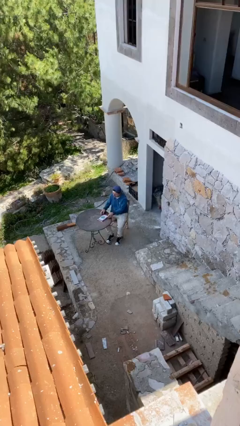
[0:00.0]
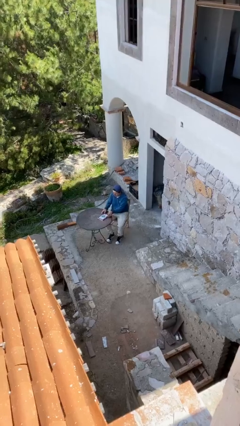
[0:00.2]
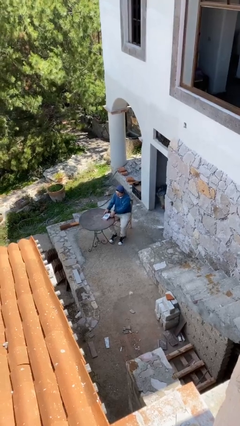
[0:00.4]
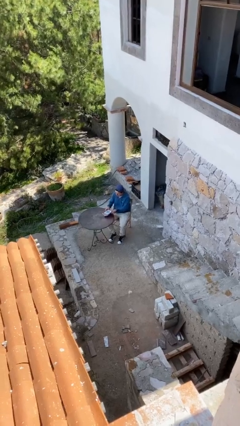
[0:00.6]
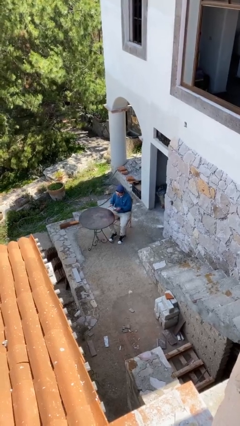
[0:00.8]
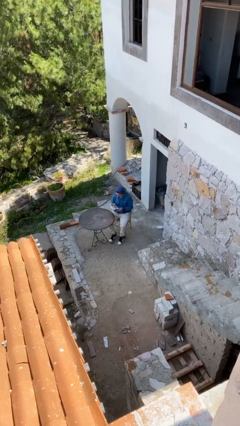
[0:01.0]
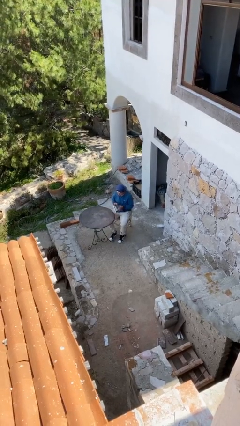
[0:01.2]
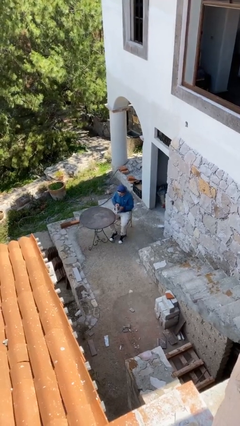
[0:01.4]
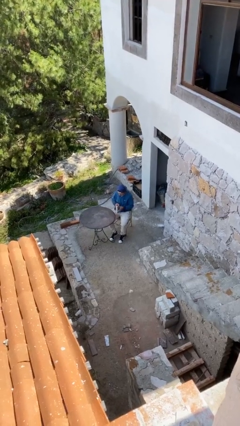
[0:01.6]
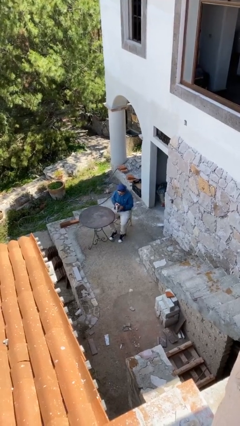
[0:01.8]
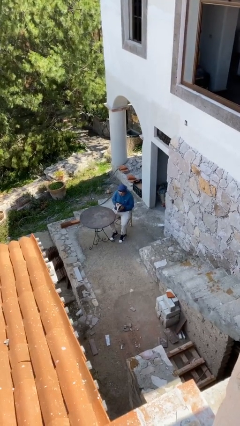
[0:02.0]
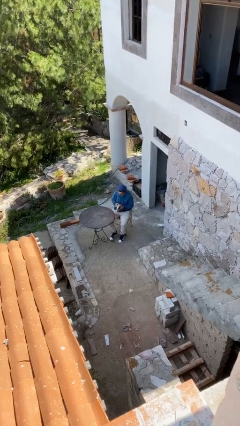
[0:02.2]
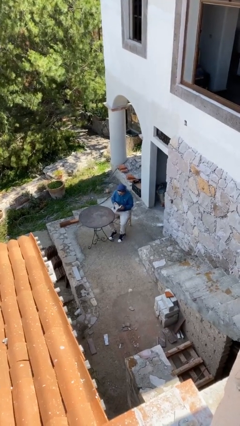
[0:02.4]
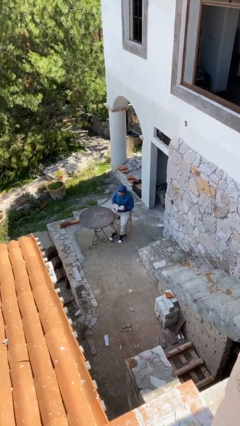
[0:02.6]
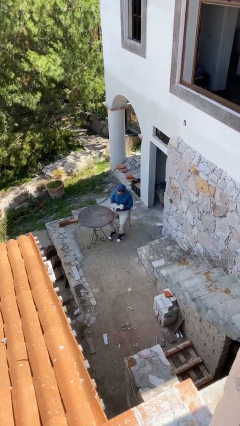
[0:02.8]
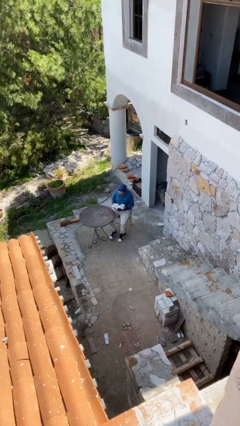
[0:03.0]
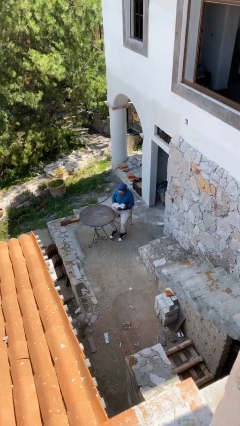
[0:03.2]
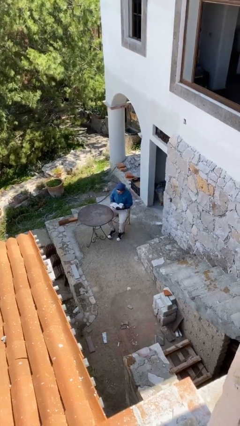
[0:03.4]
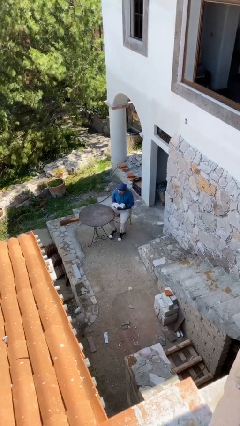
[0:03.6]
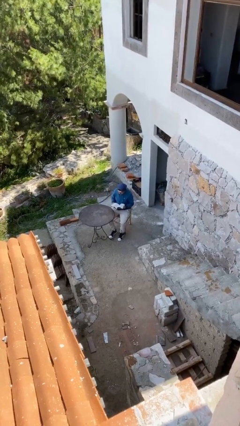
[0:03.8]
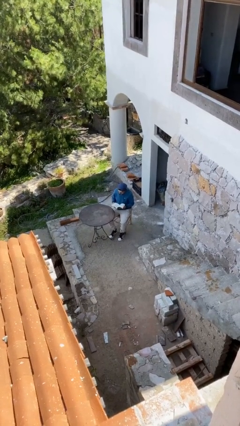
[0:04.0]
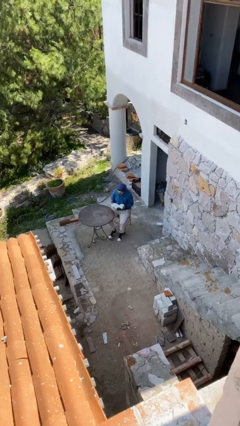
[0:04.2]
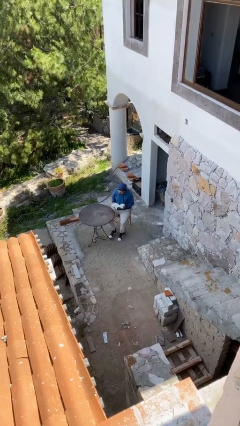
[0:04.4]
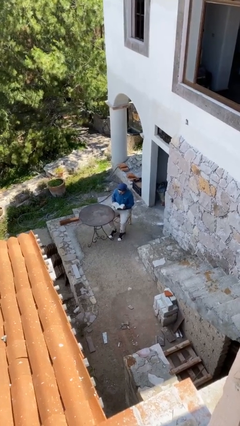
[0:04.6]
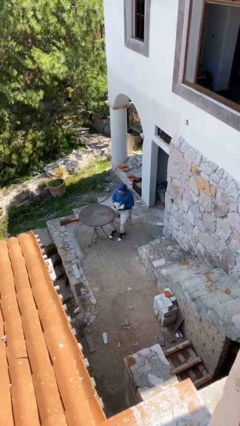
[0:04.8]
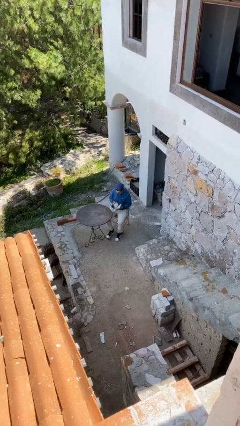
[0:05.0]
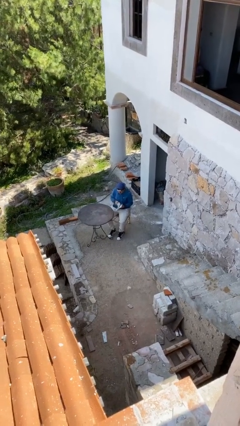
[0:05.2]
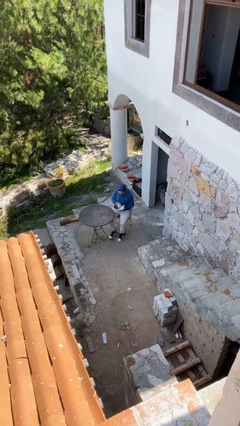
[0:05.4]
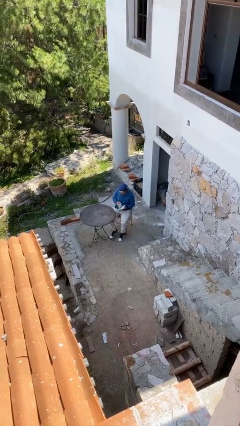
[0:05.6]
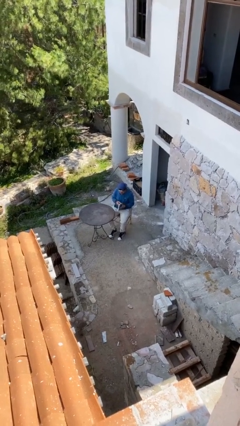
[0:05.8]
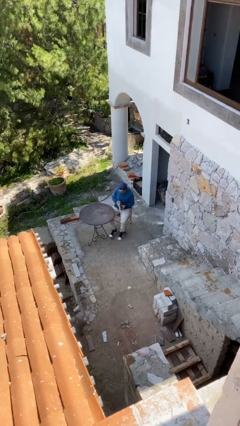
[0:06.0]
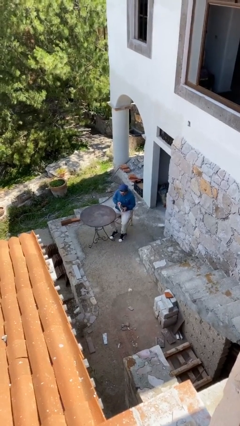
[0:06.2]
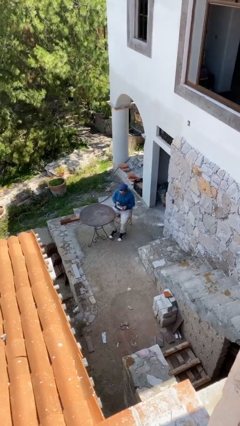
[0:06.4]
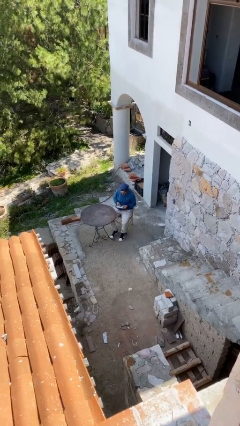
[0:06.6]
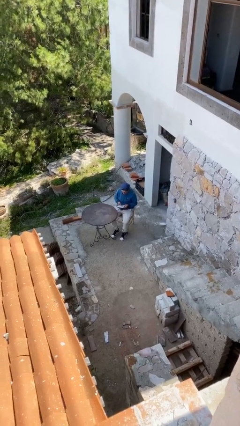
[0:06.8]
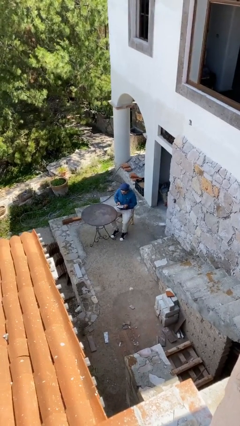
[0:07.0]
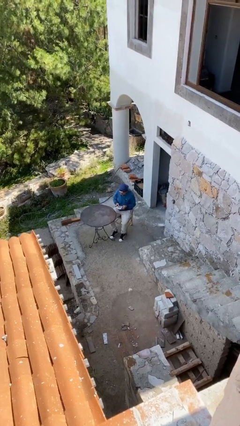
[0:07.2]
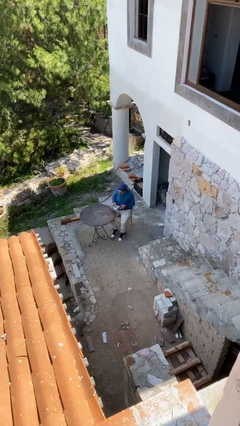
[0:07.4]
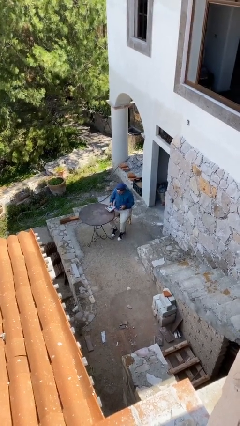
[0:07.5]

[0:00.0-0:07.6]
person reads document

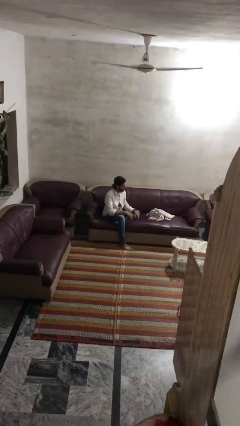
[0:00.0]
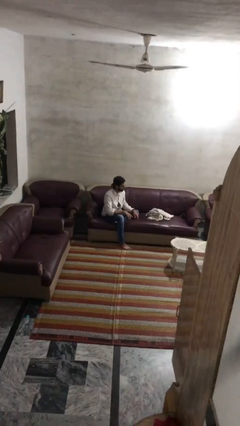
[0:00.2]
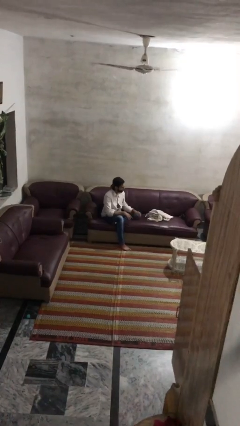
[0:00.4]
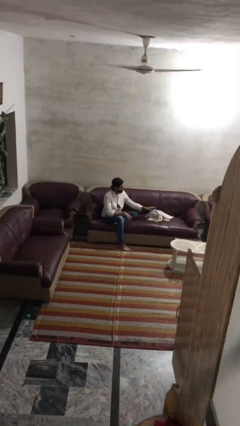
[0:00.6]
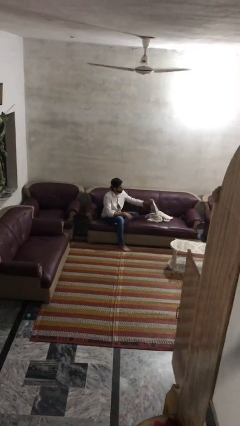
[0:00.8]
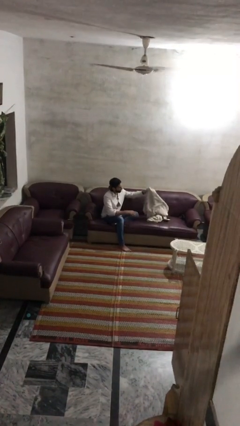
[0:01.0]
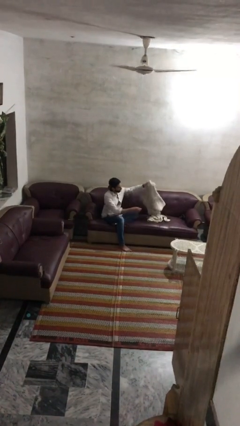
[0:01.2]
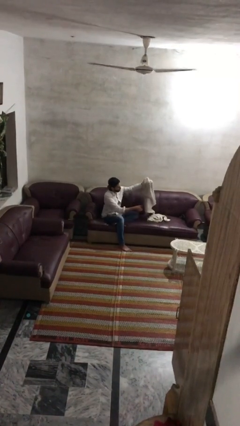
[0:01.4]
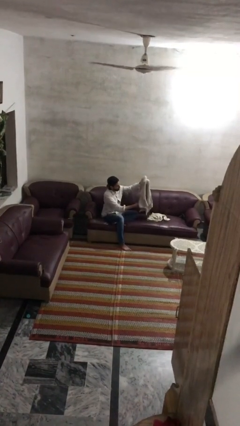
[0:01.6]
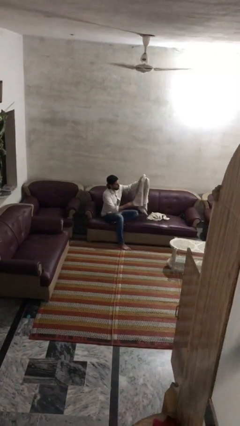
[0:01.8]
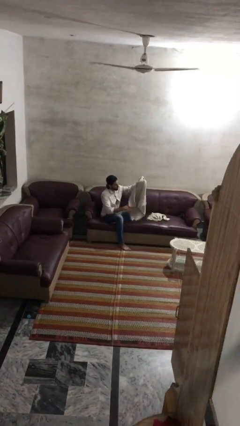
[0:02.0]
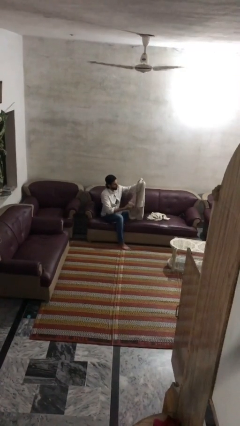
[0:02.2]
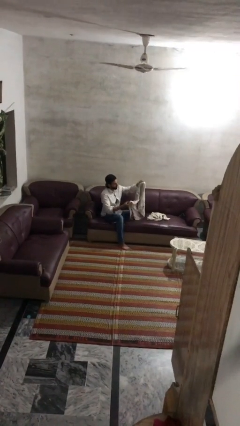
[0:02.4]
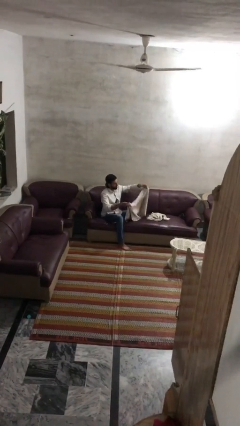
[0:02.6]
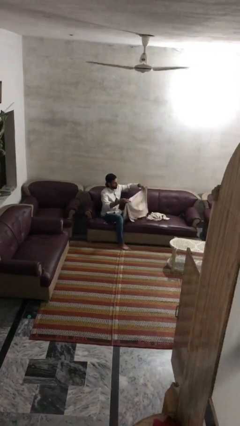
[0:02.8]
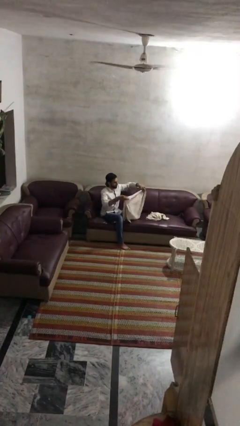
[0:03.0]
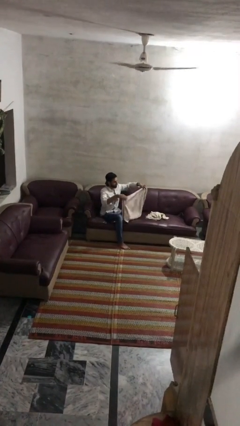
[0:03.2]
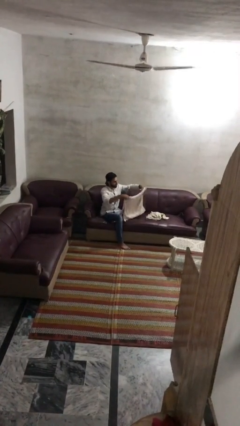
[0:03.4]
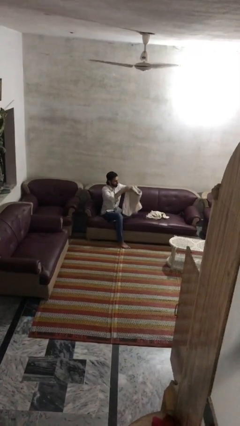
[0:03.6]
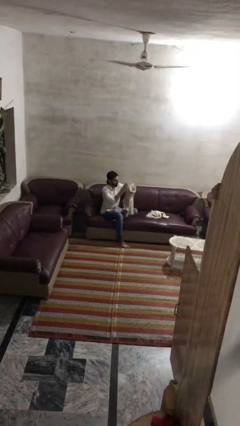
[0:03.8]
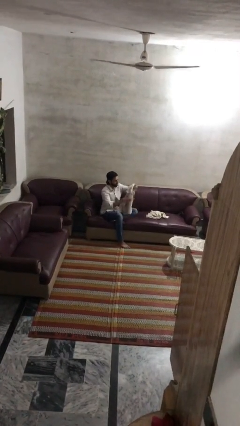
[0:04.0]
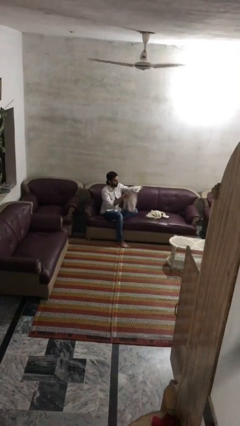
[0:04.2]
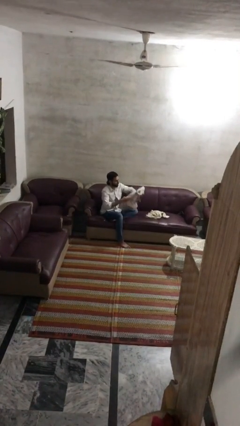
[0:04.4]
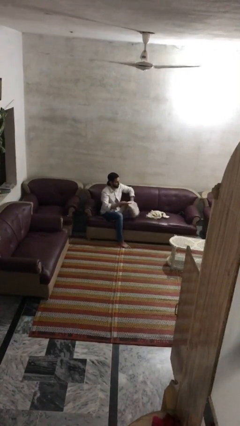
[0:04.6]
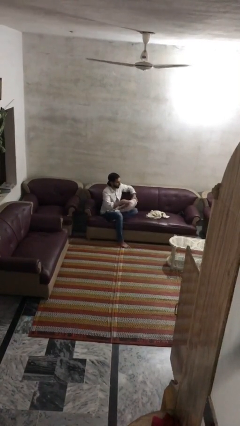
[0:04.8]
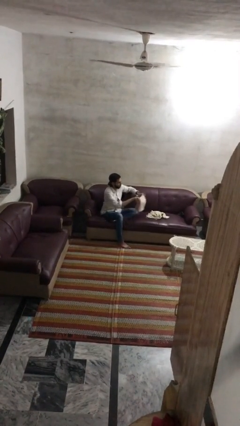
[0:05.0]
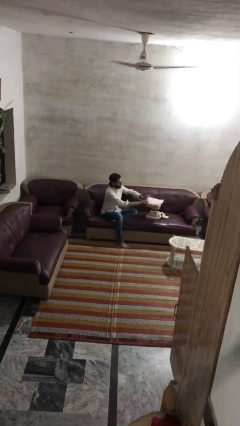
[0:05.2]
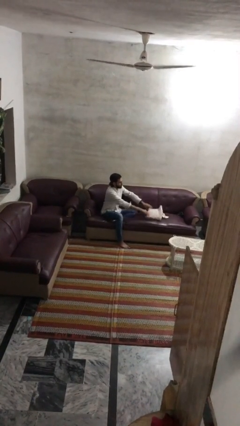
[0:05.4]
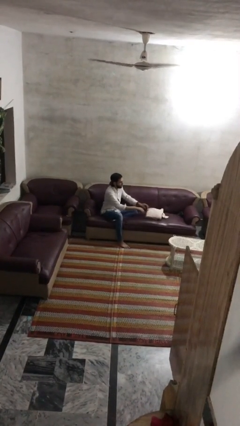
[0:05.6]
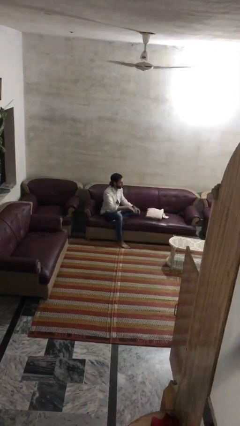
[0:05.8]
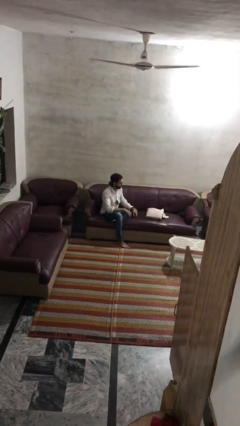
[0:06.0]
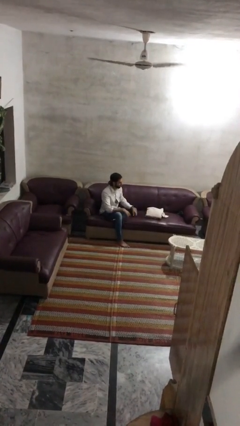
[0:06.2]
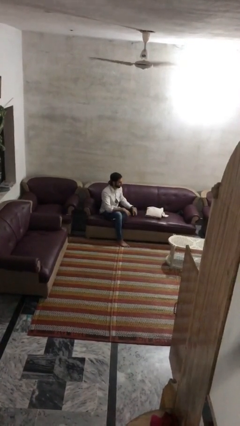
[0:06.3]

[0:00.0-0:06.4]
person folds towel

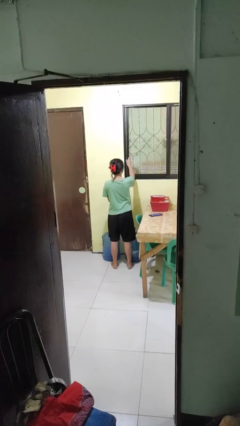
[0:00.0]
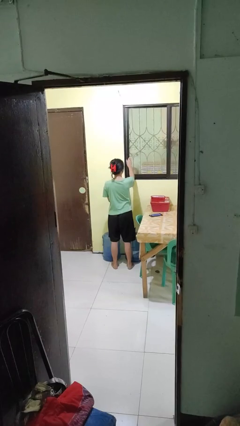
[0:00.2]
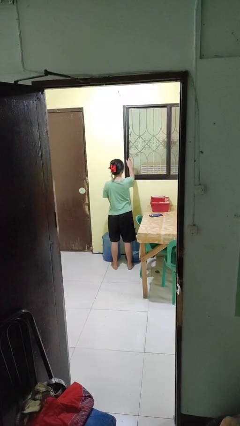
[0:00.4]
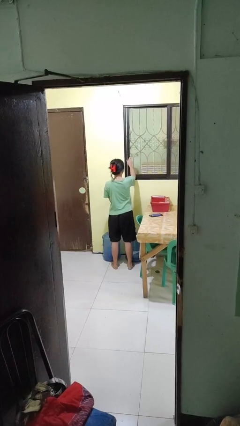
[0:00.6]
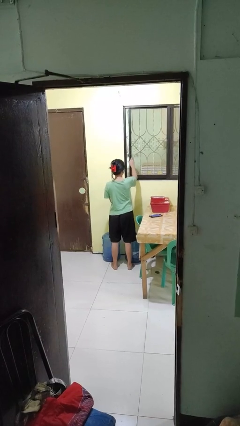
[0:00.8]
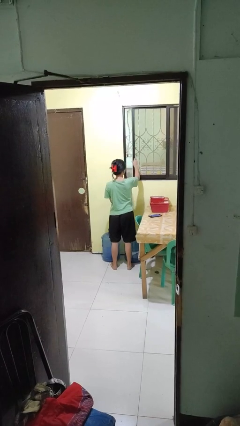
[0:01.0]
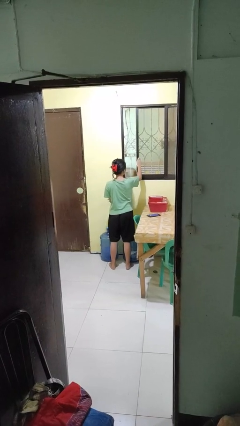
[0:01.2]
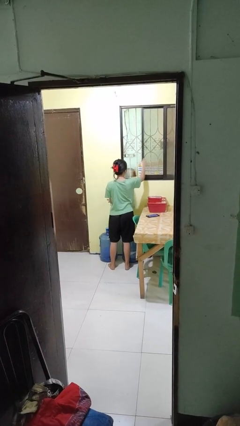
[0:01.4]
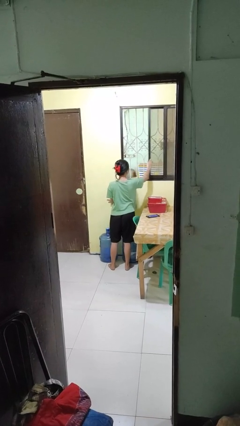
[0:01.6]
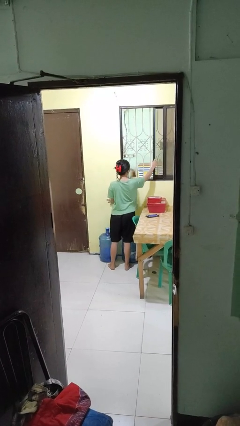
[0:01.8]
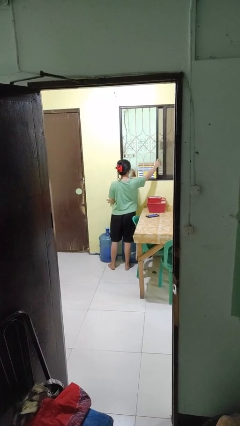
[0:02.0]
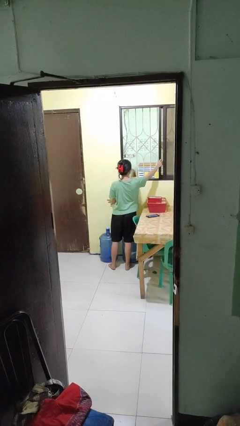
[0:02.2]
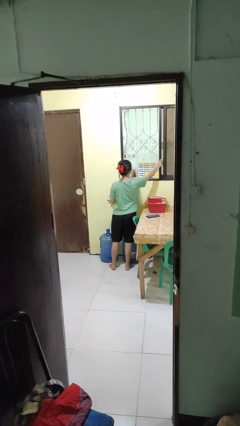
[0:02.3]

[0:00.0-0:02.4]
person opens home window

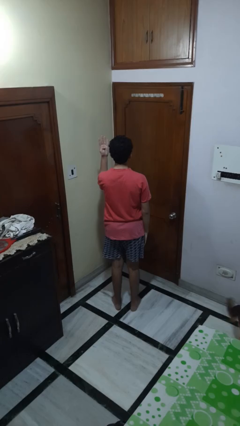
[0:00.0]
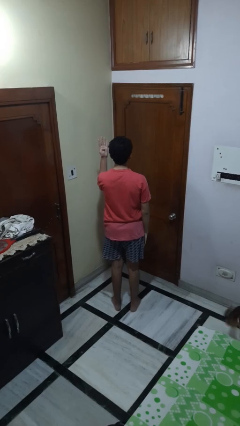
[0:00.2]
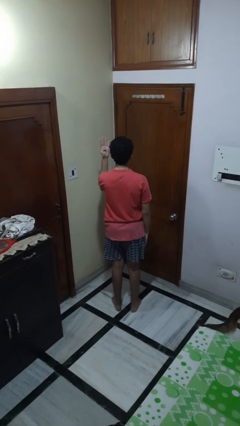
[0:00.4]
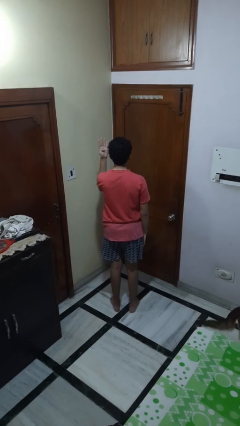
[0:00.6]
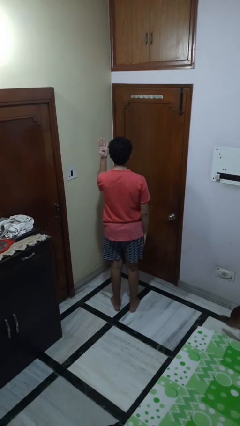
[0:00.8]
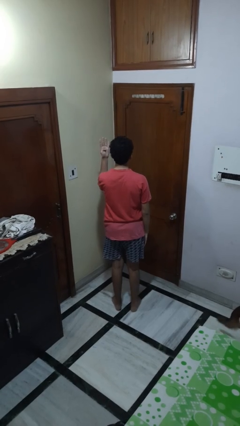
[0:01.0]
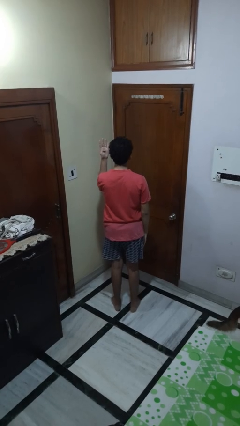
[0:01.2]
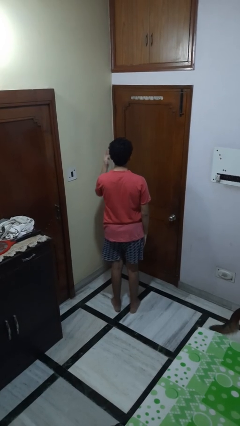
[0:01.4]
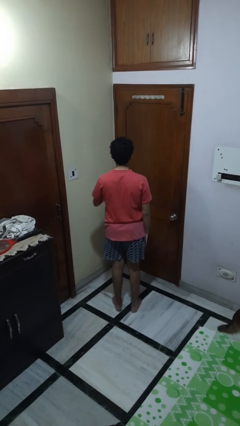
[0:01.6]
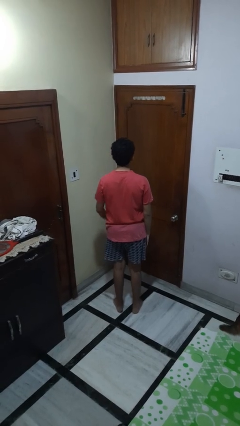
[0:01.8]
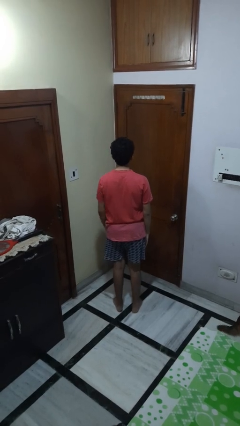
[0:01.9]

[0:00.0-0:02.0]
person gestures number four
